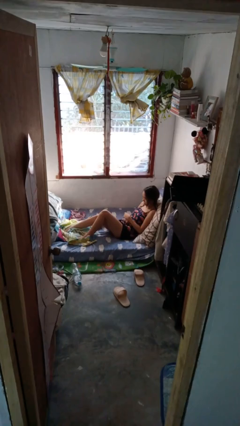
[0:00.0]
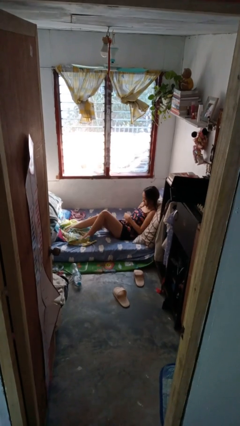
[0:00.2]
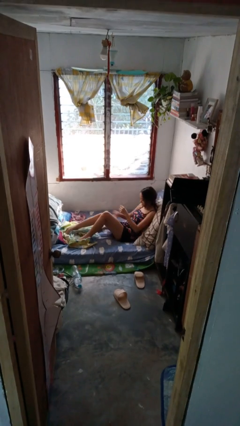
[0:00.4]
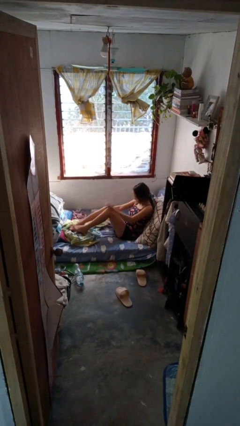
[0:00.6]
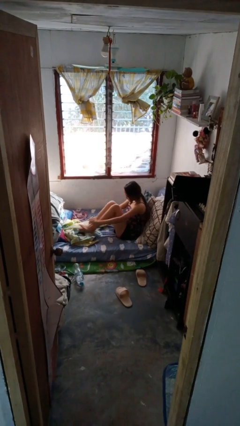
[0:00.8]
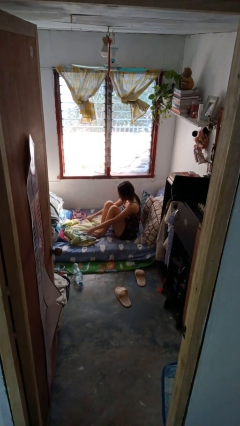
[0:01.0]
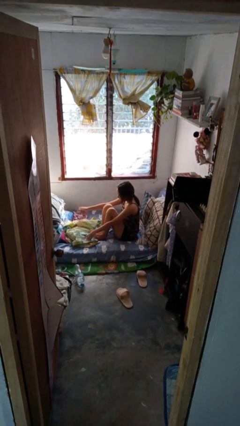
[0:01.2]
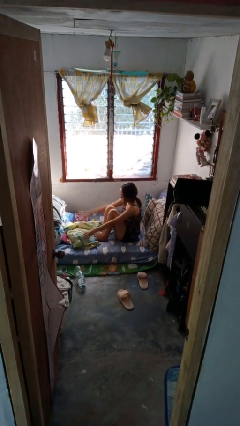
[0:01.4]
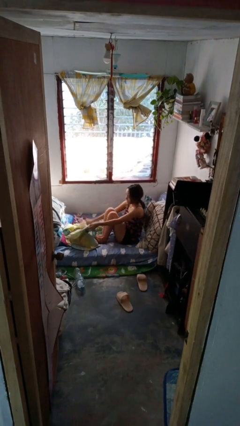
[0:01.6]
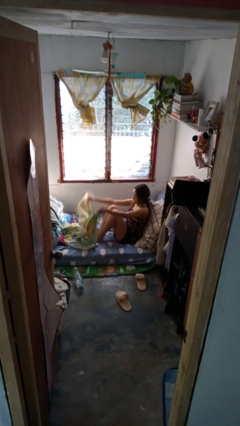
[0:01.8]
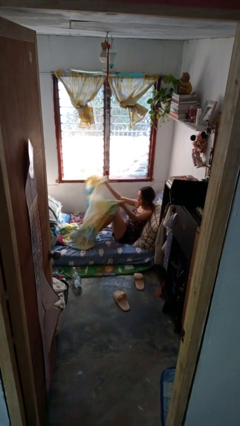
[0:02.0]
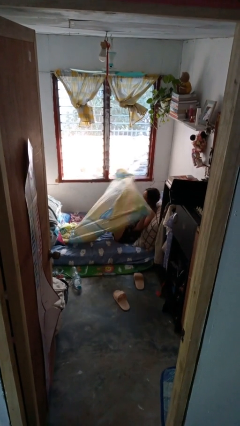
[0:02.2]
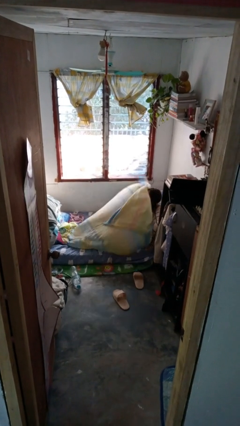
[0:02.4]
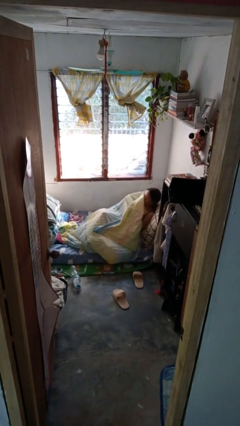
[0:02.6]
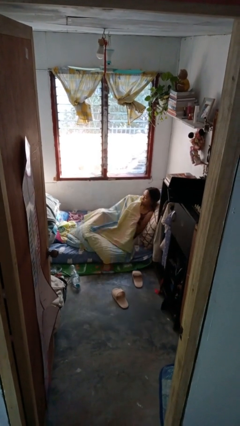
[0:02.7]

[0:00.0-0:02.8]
person covers with bedsheets

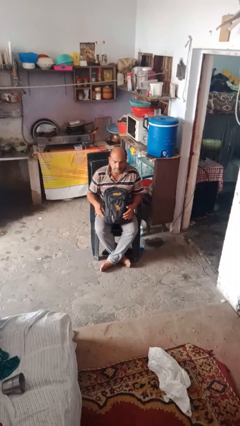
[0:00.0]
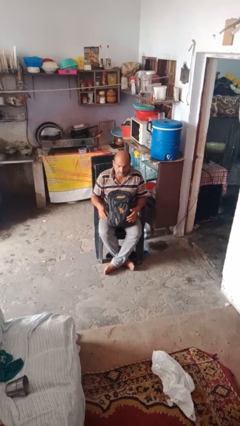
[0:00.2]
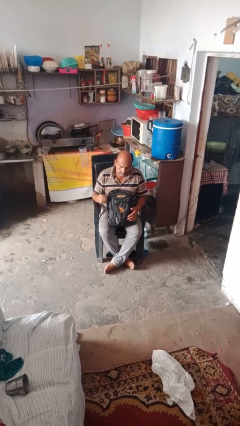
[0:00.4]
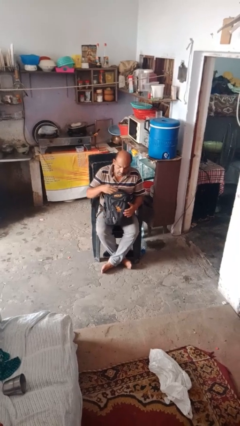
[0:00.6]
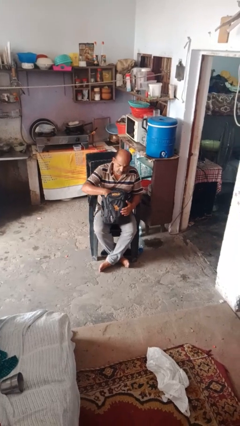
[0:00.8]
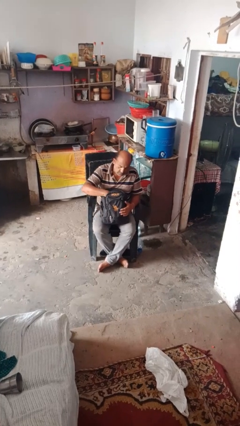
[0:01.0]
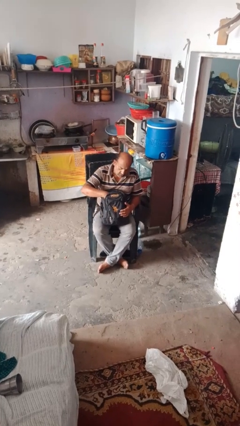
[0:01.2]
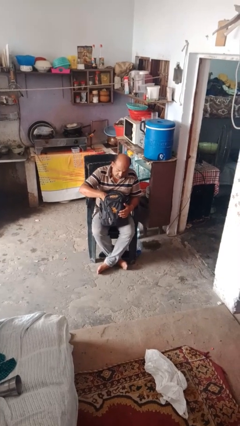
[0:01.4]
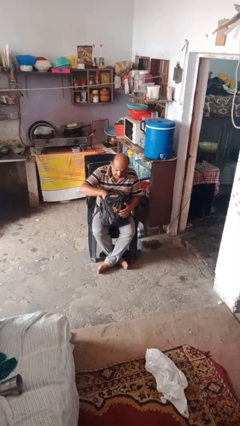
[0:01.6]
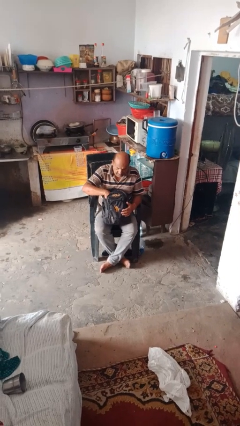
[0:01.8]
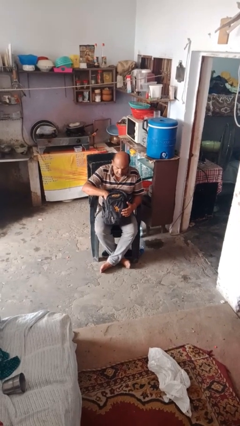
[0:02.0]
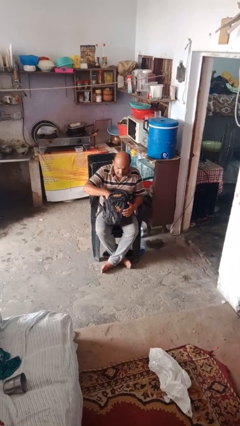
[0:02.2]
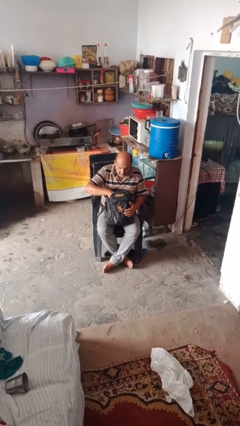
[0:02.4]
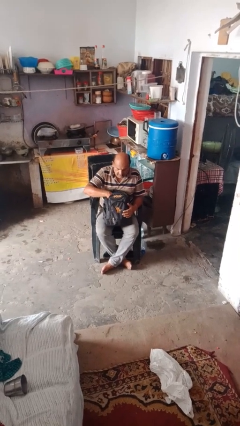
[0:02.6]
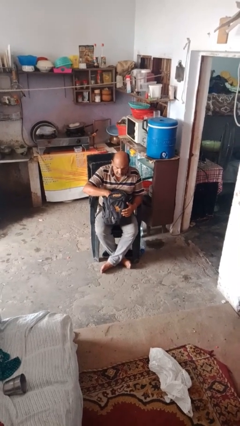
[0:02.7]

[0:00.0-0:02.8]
person searches in backpack

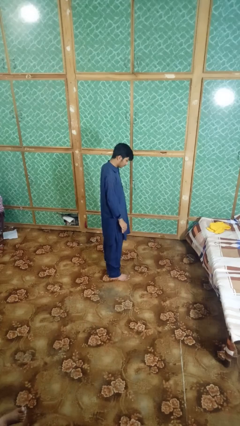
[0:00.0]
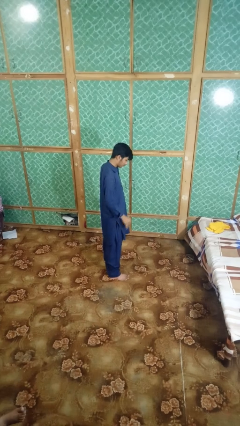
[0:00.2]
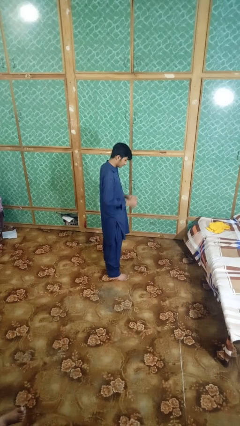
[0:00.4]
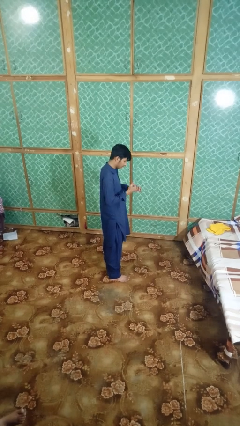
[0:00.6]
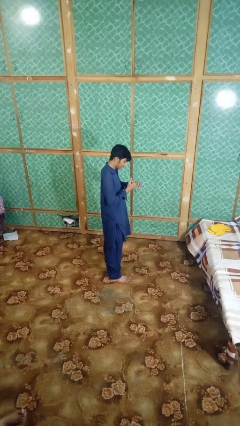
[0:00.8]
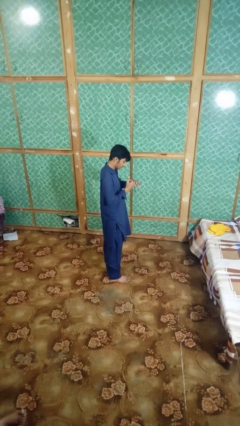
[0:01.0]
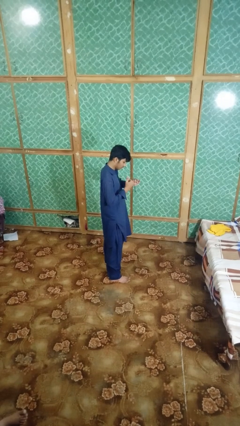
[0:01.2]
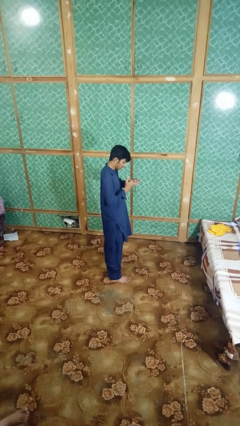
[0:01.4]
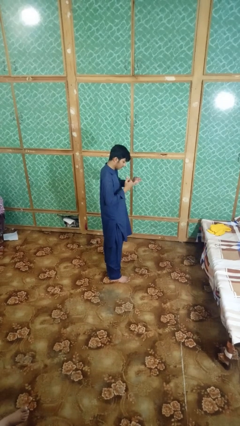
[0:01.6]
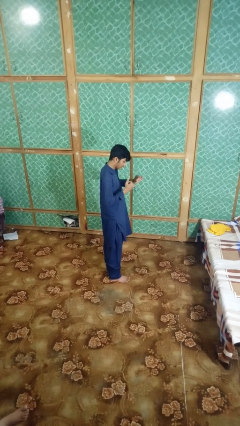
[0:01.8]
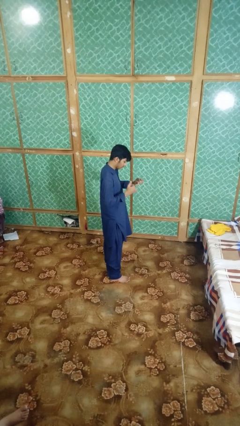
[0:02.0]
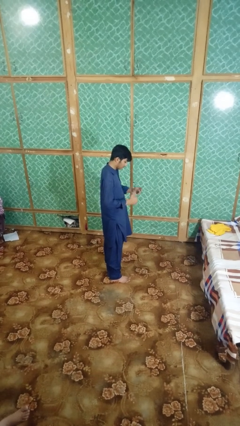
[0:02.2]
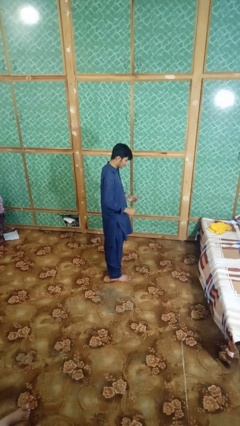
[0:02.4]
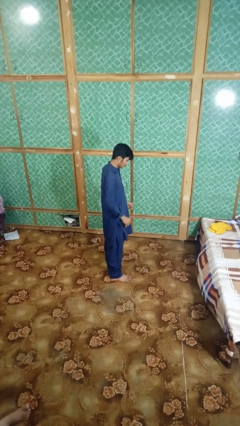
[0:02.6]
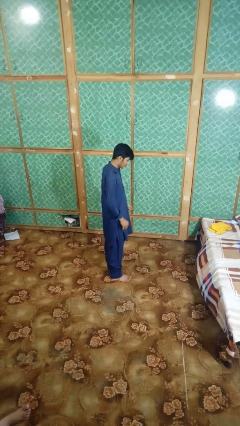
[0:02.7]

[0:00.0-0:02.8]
person takes off ring

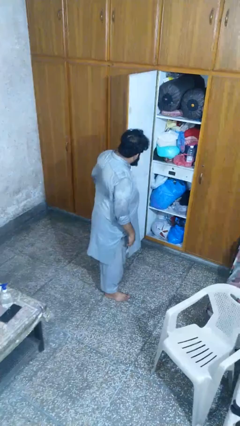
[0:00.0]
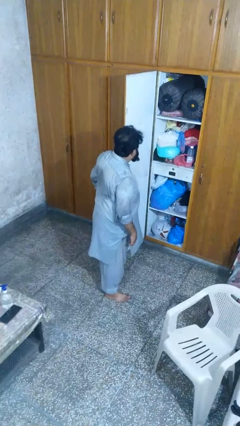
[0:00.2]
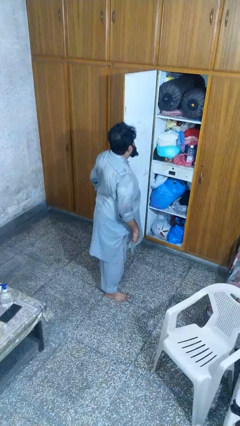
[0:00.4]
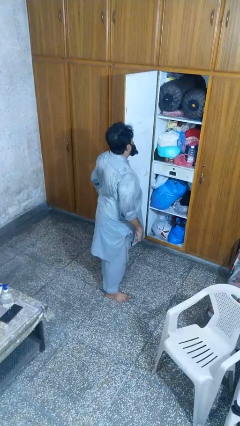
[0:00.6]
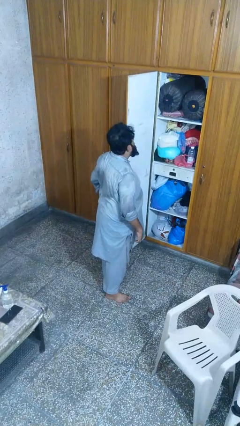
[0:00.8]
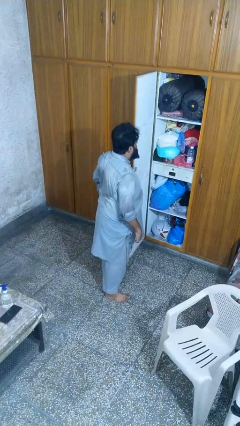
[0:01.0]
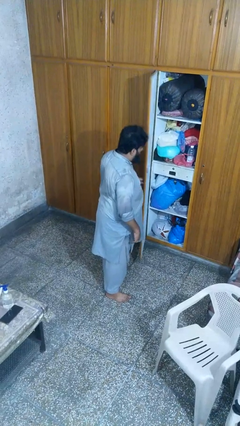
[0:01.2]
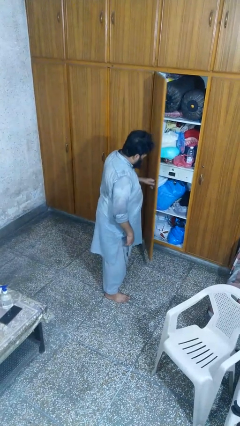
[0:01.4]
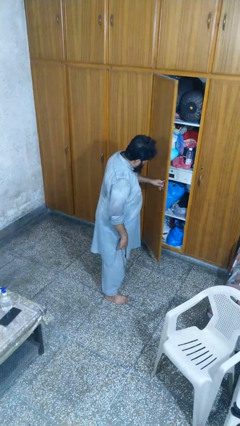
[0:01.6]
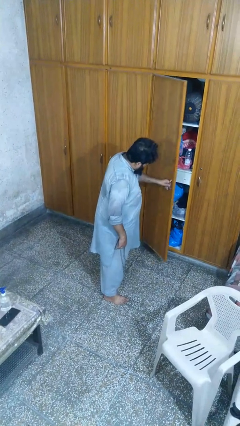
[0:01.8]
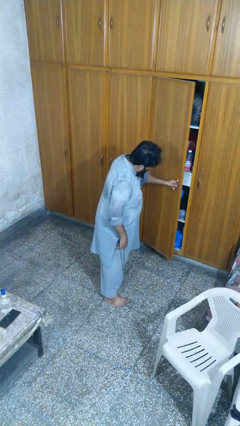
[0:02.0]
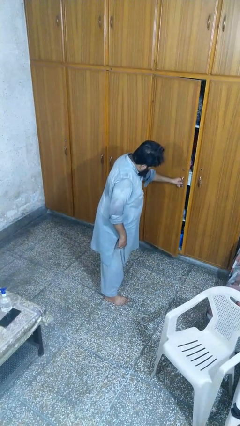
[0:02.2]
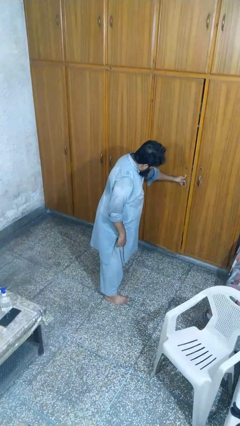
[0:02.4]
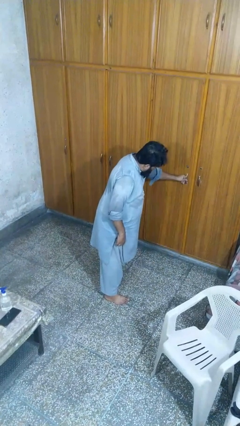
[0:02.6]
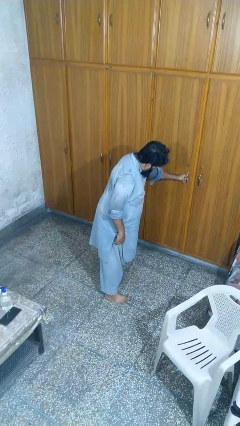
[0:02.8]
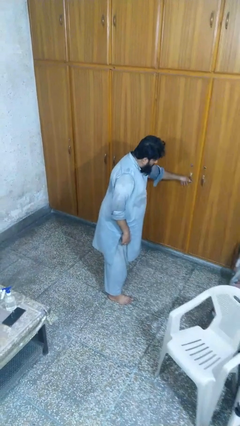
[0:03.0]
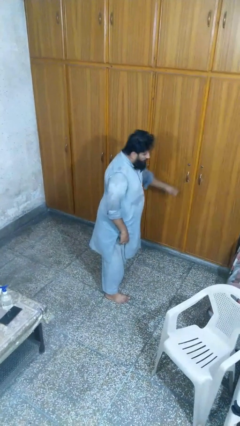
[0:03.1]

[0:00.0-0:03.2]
person closes closet door

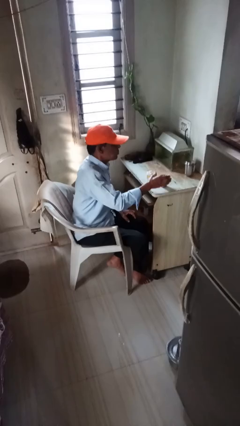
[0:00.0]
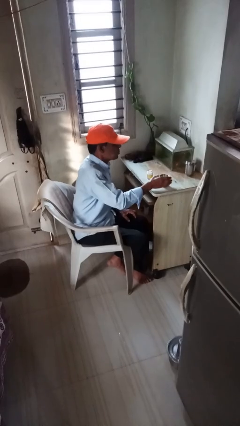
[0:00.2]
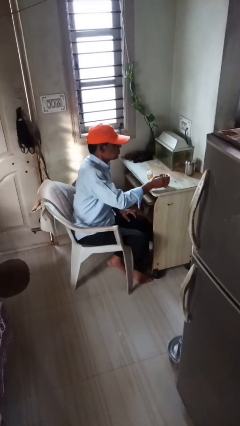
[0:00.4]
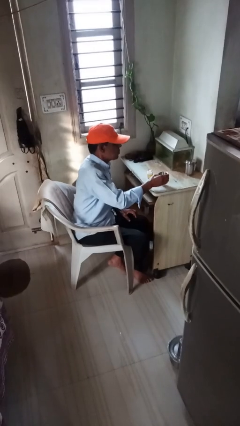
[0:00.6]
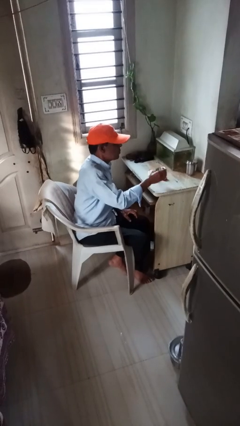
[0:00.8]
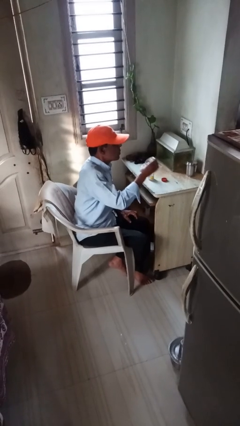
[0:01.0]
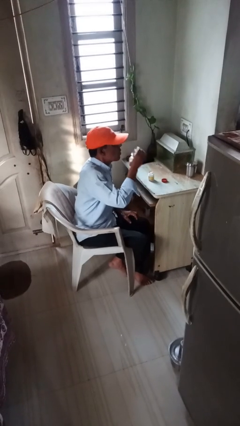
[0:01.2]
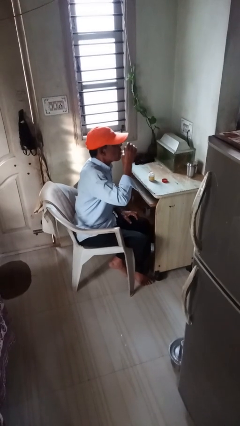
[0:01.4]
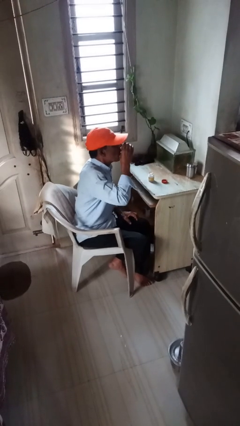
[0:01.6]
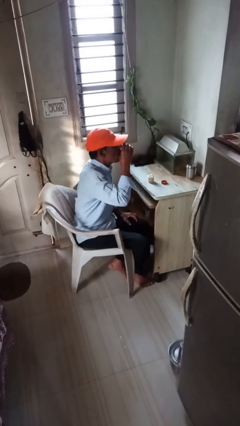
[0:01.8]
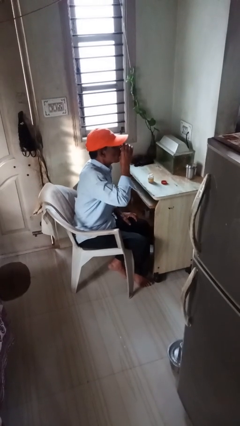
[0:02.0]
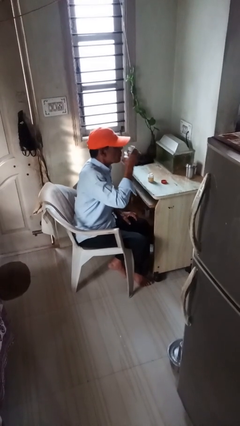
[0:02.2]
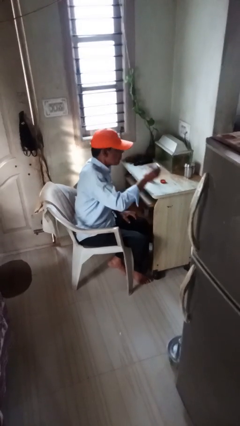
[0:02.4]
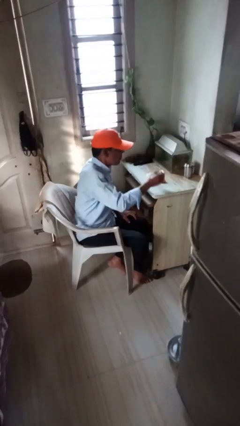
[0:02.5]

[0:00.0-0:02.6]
person drinks from cup

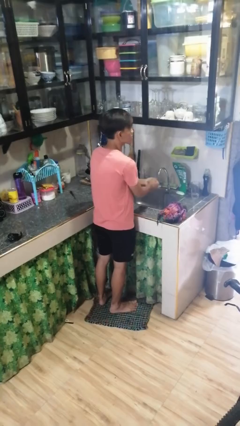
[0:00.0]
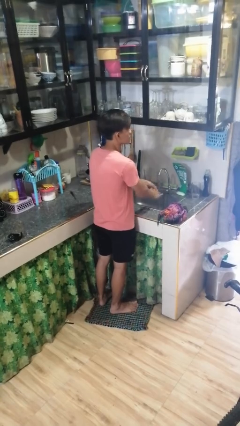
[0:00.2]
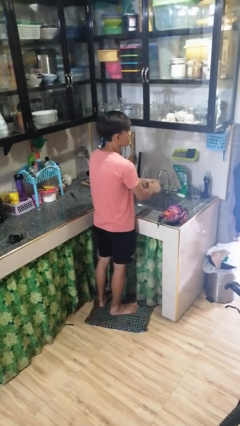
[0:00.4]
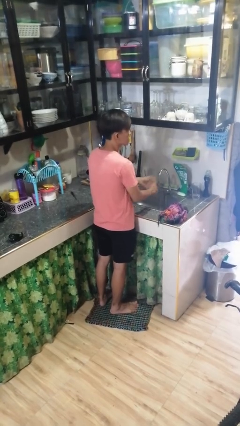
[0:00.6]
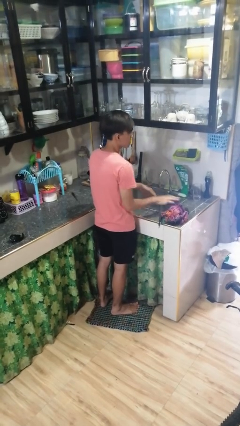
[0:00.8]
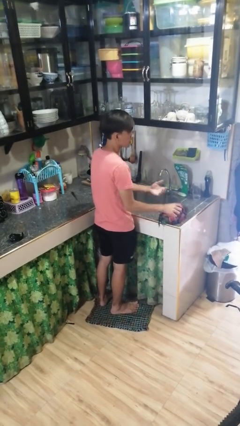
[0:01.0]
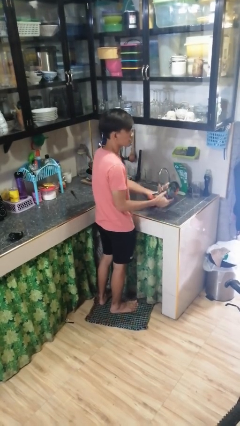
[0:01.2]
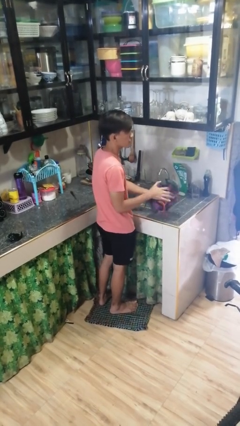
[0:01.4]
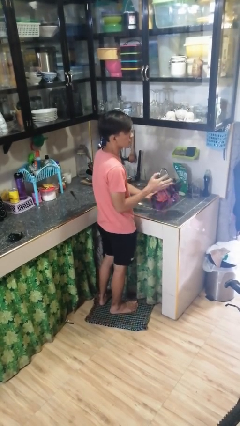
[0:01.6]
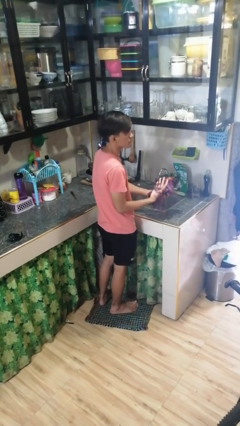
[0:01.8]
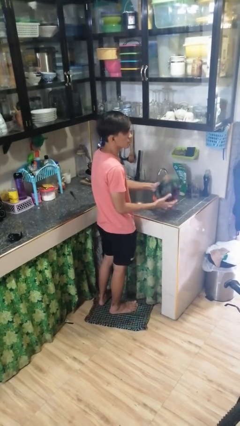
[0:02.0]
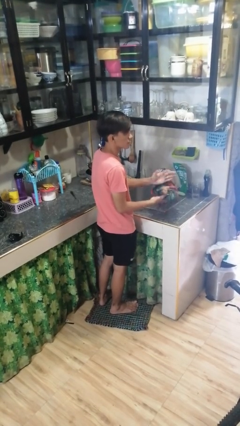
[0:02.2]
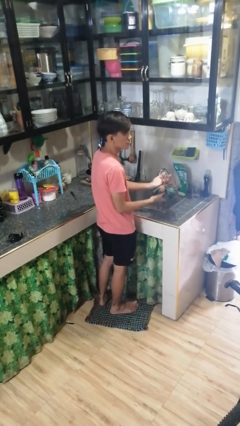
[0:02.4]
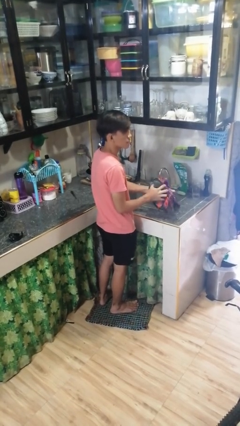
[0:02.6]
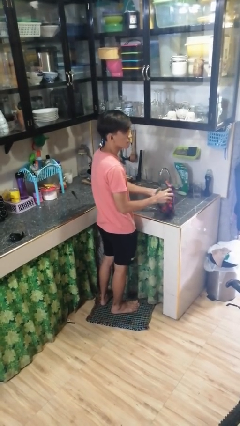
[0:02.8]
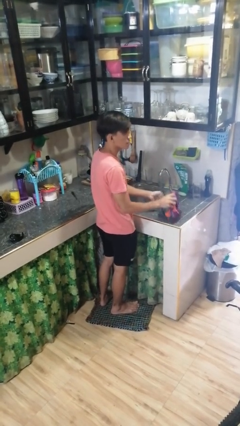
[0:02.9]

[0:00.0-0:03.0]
person dries hands with towel
